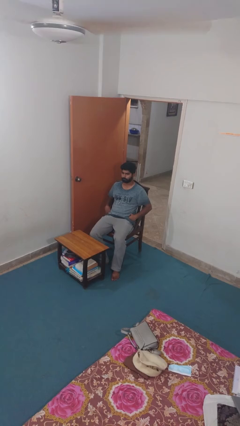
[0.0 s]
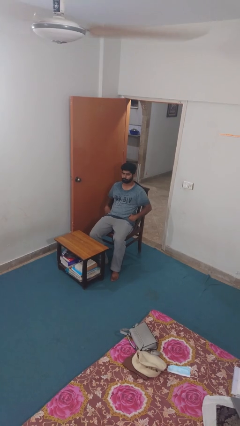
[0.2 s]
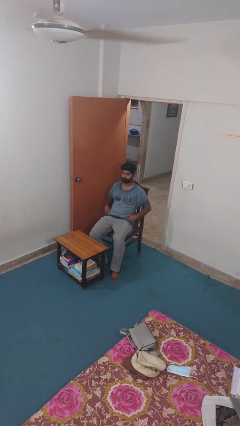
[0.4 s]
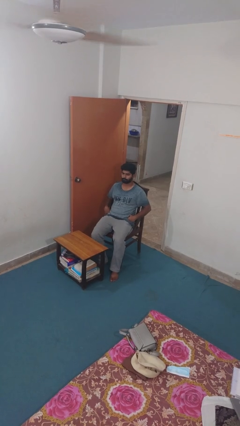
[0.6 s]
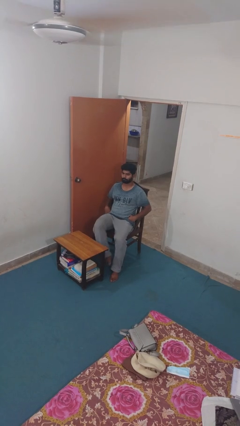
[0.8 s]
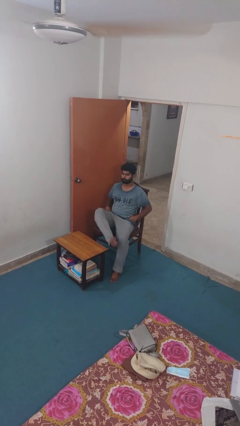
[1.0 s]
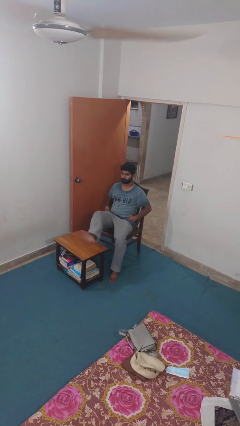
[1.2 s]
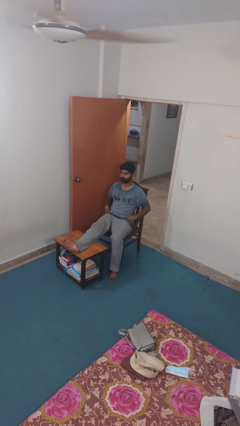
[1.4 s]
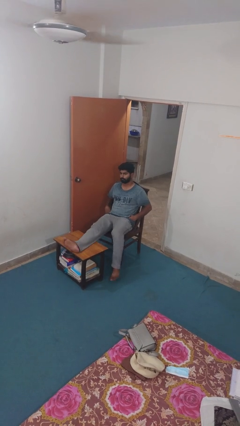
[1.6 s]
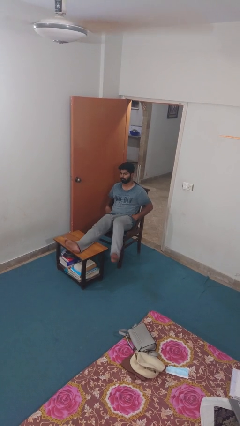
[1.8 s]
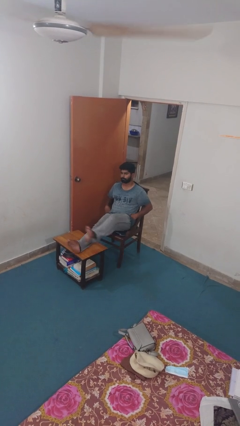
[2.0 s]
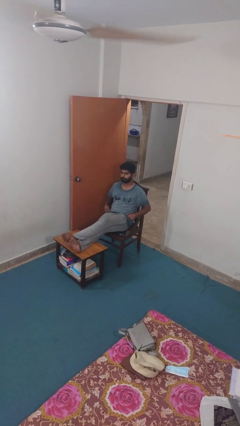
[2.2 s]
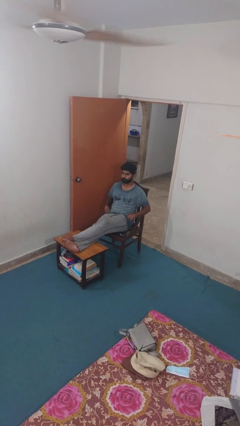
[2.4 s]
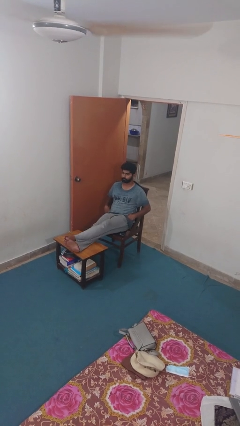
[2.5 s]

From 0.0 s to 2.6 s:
person puts feet up

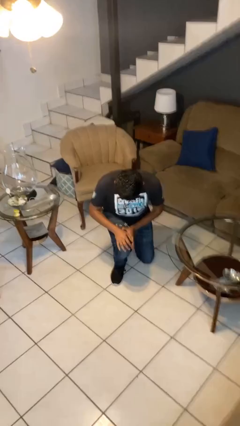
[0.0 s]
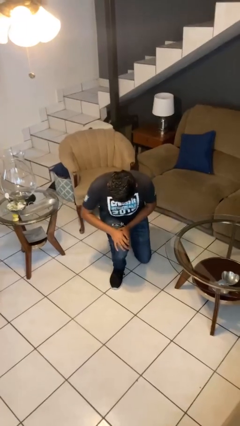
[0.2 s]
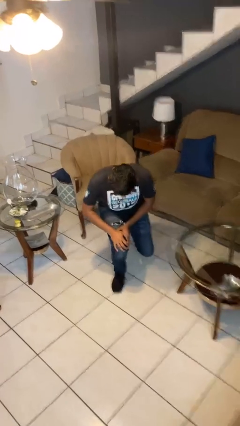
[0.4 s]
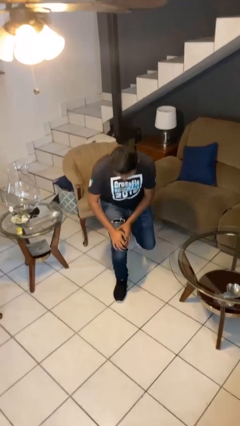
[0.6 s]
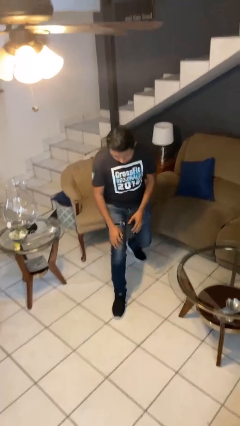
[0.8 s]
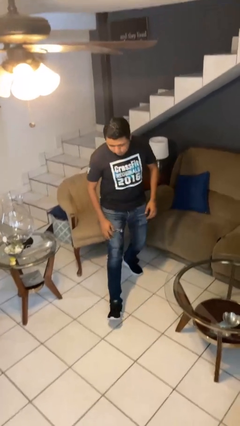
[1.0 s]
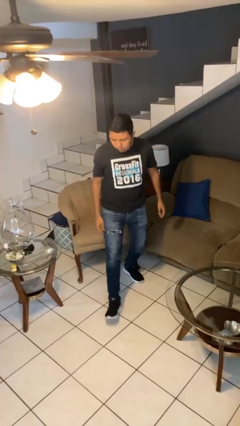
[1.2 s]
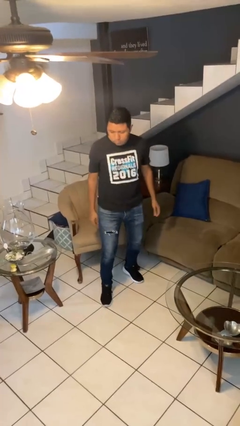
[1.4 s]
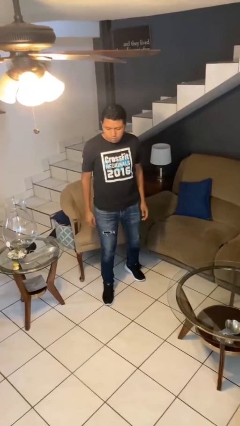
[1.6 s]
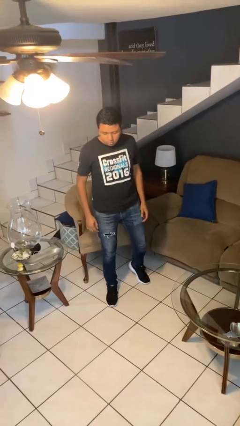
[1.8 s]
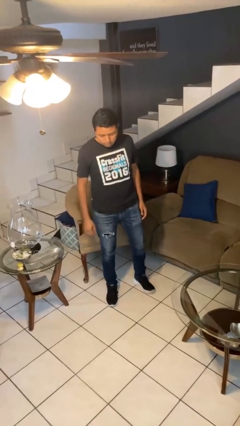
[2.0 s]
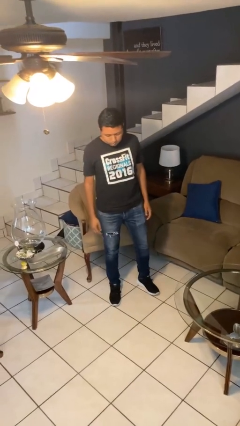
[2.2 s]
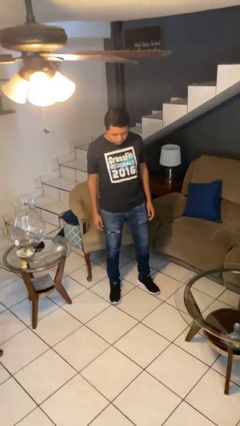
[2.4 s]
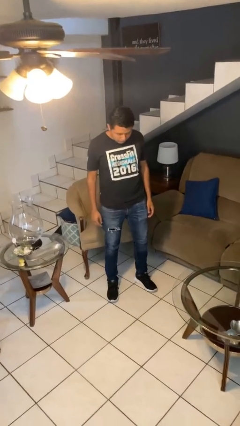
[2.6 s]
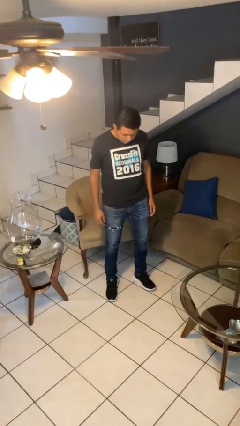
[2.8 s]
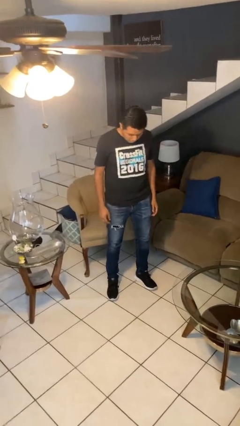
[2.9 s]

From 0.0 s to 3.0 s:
person stands up from floor

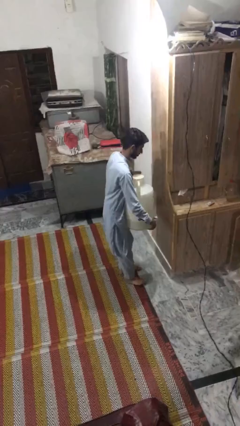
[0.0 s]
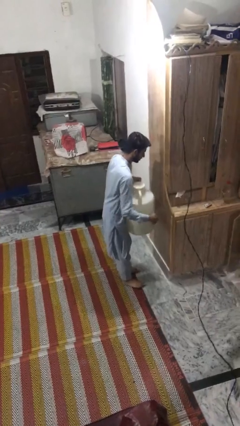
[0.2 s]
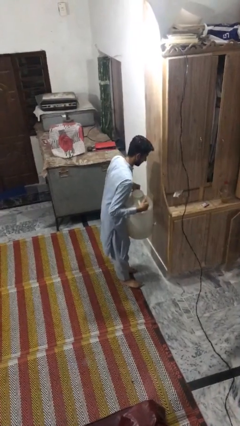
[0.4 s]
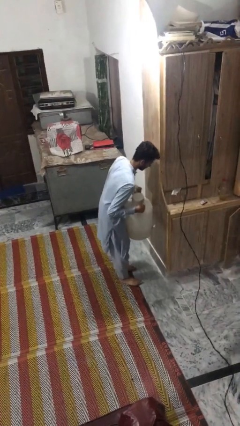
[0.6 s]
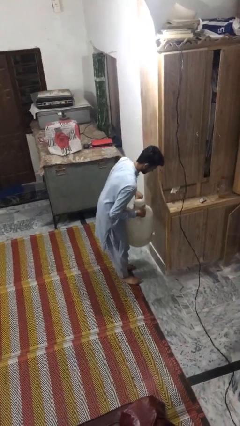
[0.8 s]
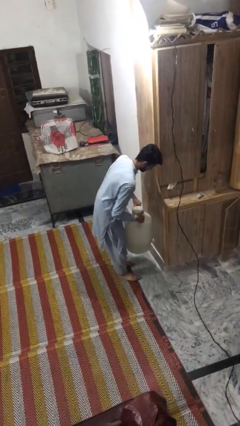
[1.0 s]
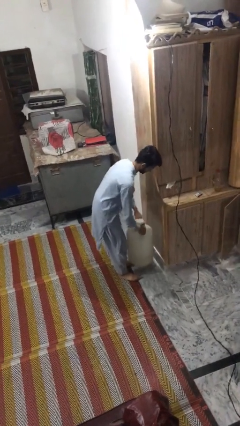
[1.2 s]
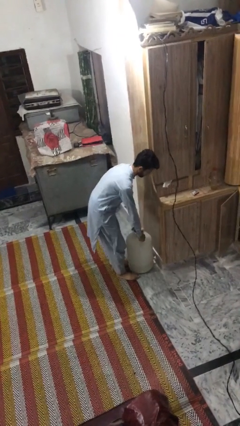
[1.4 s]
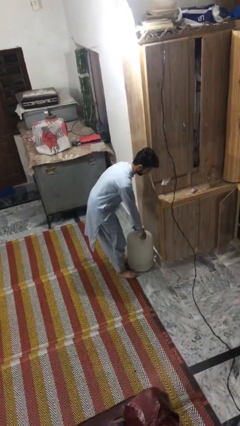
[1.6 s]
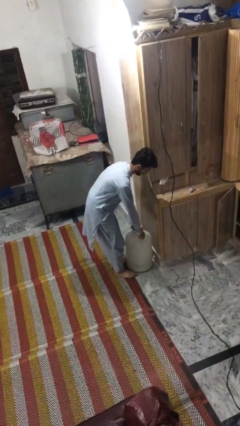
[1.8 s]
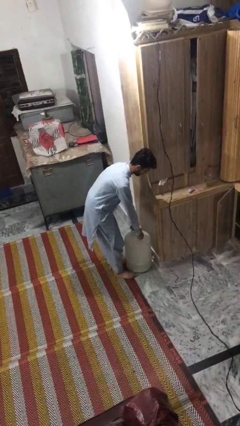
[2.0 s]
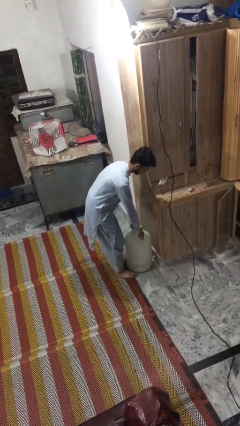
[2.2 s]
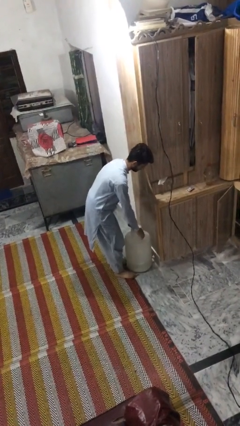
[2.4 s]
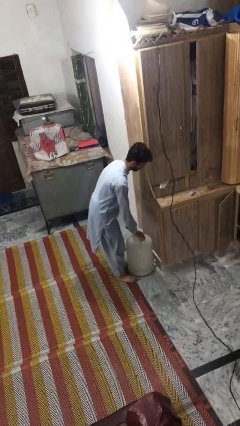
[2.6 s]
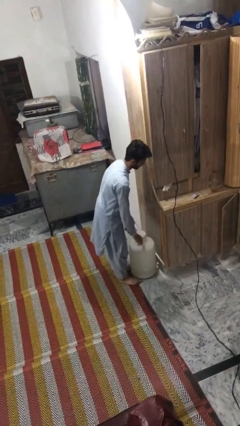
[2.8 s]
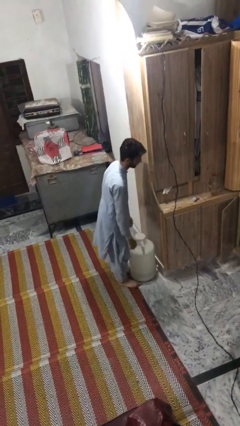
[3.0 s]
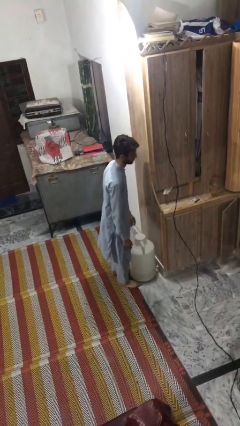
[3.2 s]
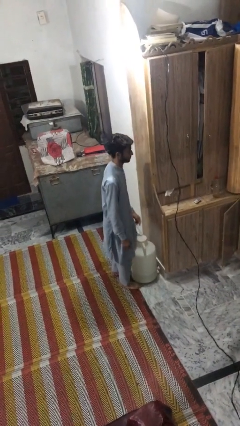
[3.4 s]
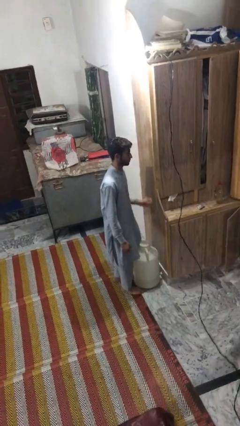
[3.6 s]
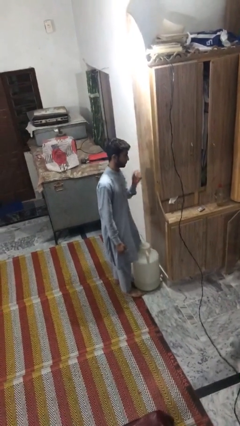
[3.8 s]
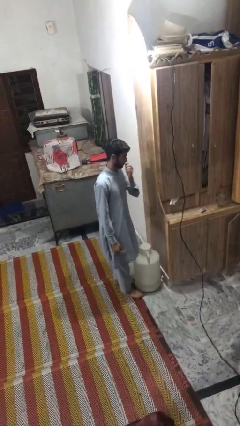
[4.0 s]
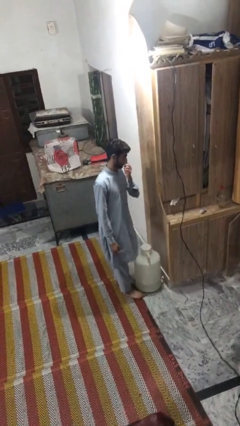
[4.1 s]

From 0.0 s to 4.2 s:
person puts down object on floor

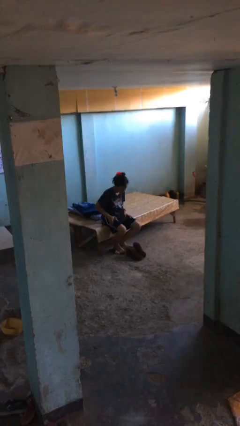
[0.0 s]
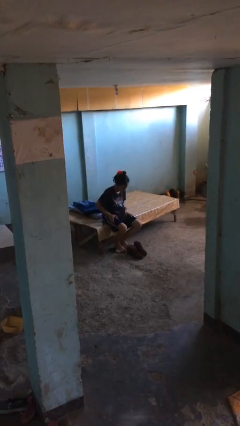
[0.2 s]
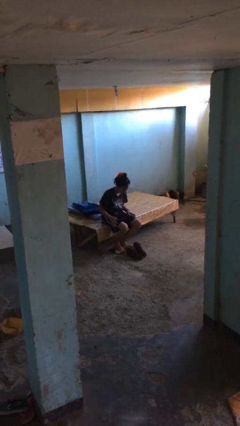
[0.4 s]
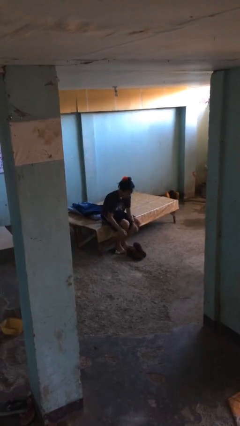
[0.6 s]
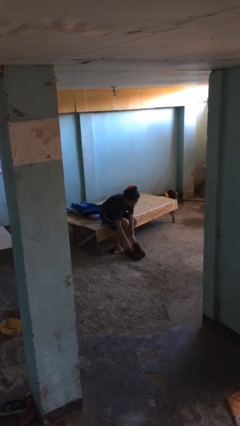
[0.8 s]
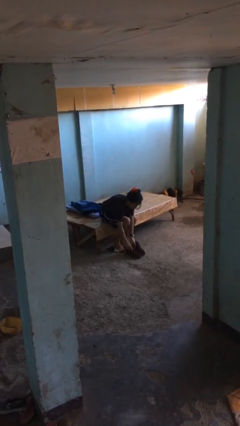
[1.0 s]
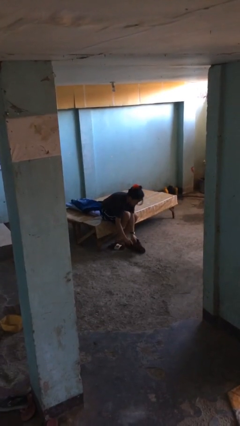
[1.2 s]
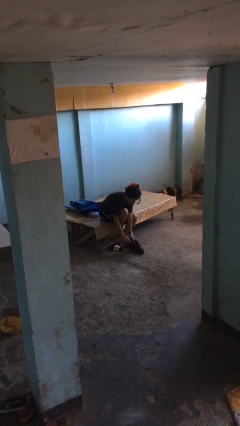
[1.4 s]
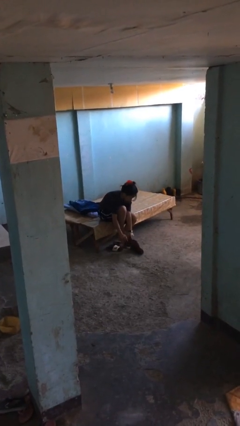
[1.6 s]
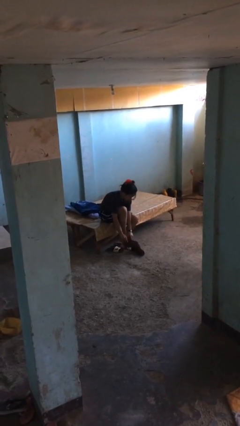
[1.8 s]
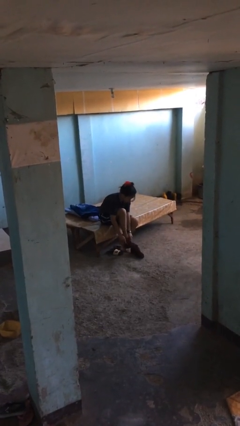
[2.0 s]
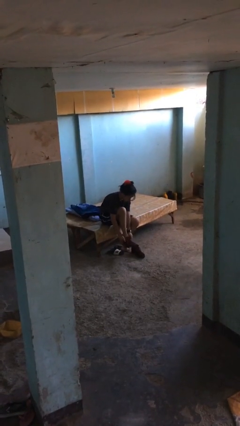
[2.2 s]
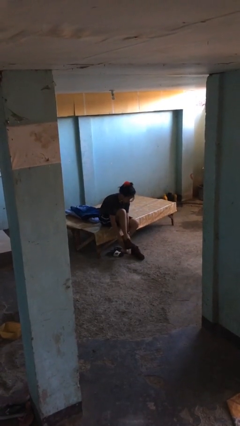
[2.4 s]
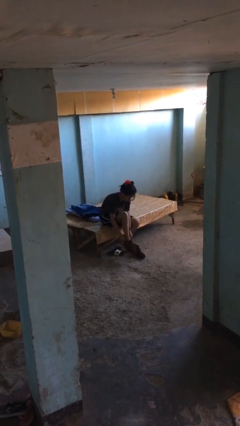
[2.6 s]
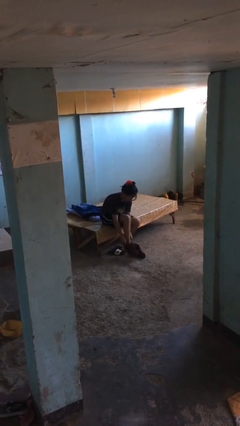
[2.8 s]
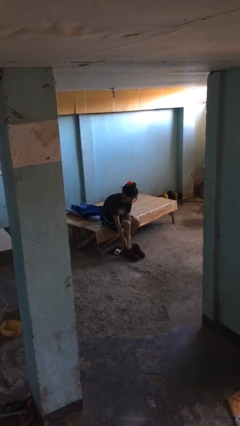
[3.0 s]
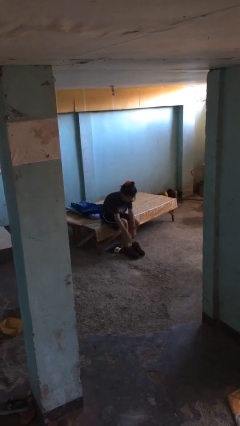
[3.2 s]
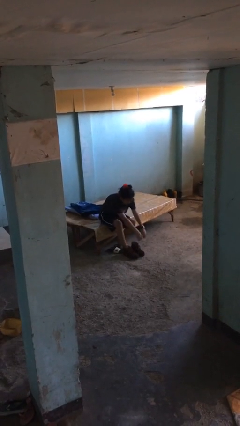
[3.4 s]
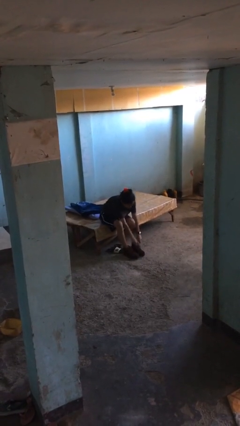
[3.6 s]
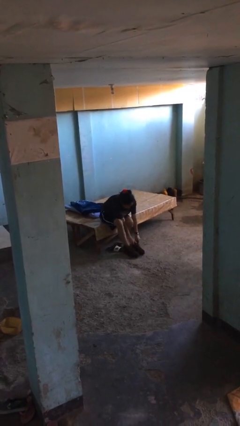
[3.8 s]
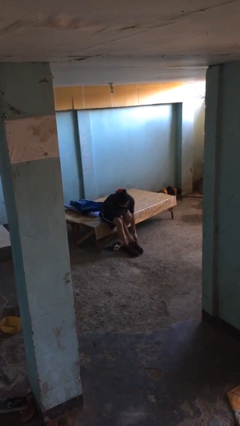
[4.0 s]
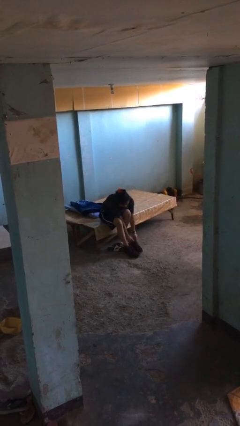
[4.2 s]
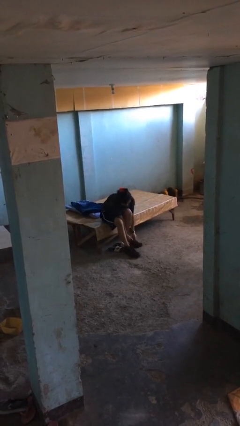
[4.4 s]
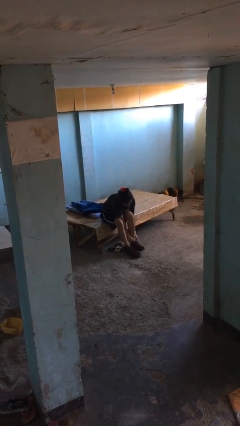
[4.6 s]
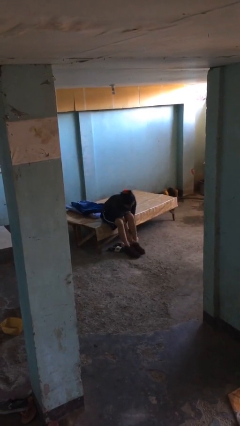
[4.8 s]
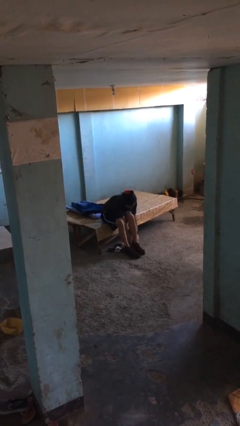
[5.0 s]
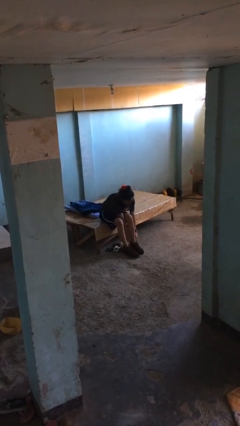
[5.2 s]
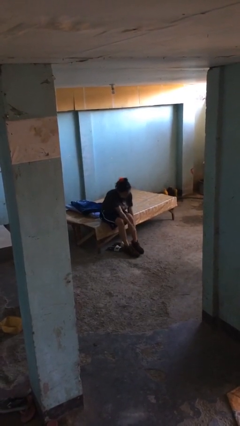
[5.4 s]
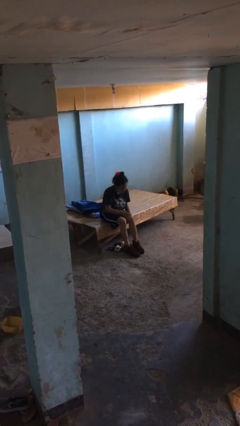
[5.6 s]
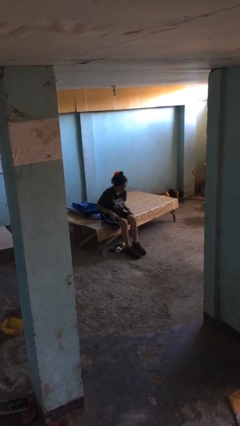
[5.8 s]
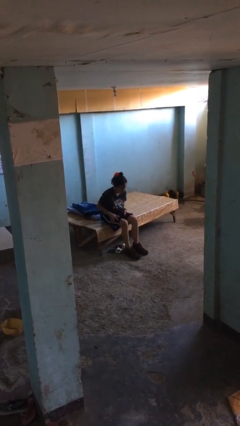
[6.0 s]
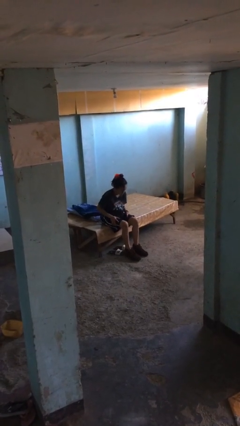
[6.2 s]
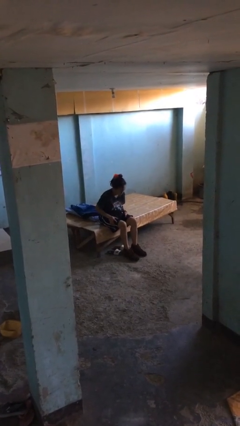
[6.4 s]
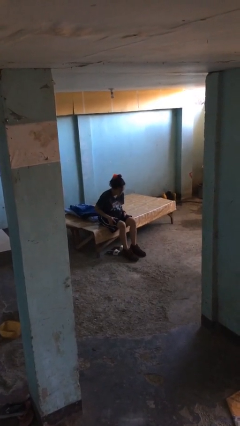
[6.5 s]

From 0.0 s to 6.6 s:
person puts on boots

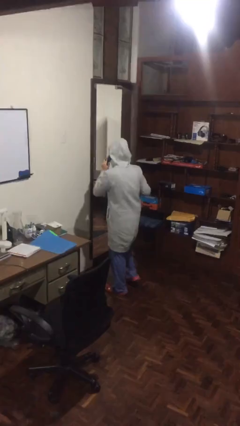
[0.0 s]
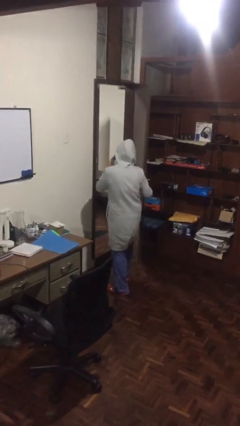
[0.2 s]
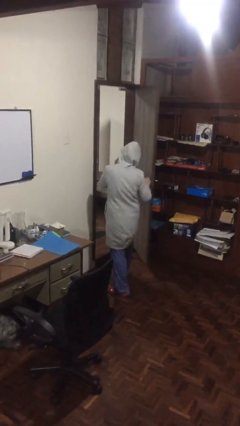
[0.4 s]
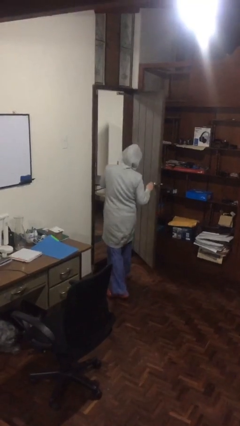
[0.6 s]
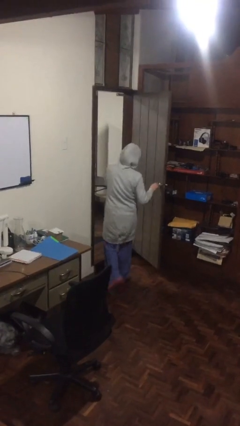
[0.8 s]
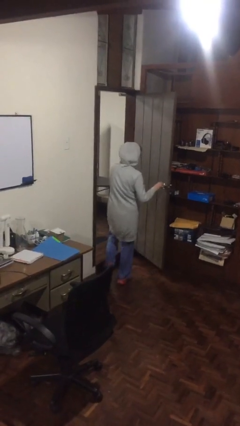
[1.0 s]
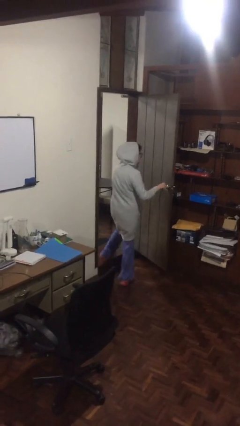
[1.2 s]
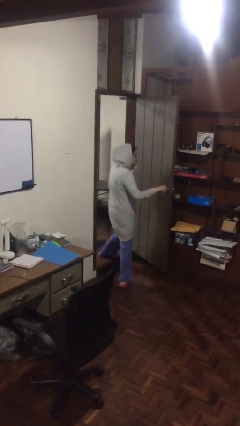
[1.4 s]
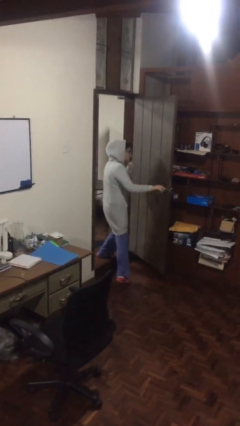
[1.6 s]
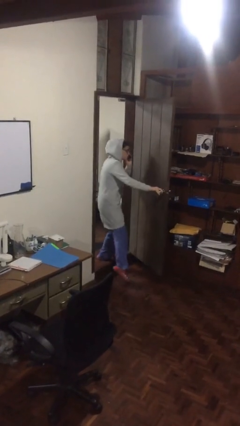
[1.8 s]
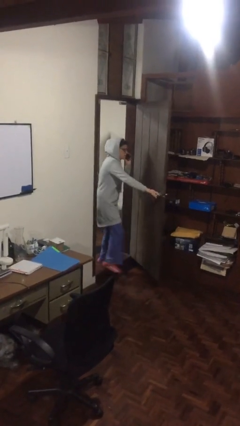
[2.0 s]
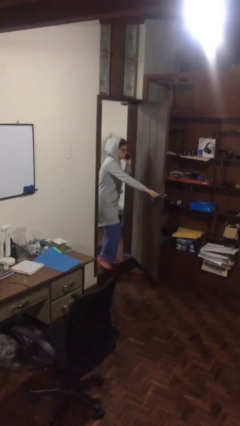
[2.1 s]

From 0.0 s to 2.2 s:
person exits scene through structure
